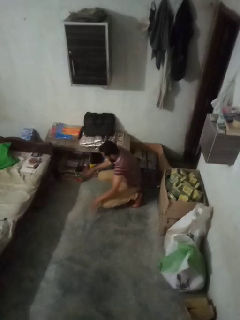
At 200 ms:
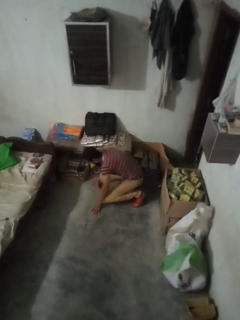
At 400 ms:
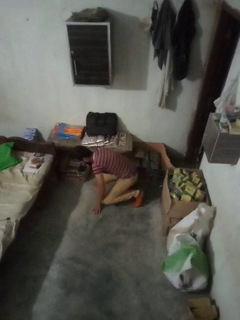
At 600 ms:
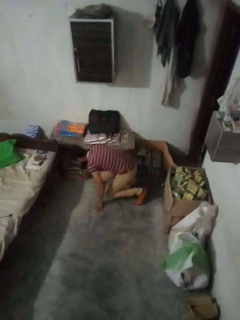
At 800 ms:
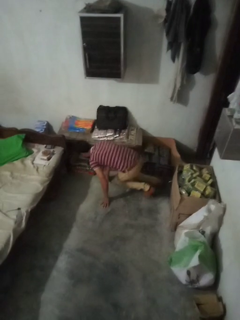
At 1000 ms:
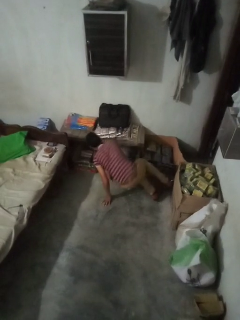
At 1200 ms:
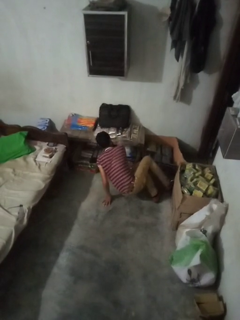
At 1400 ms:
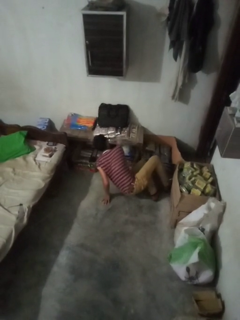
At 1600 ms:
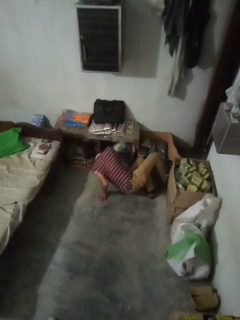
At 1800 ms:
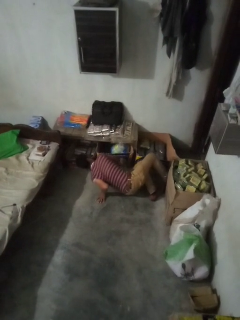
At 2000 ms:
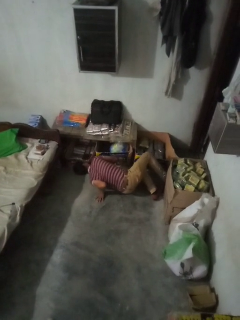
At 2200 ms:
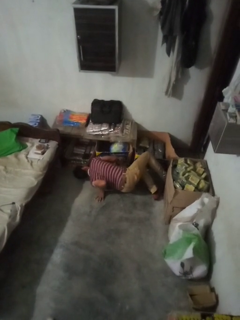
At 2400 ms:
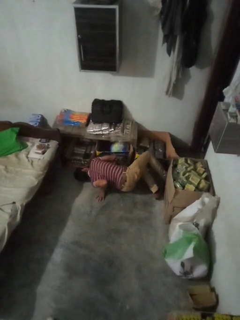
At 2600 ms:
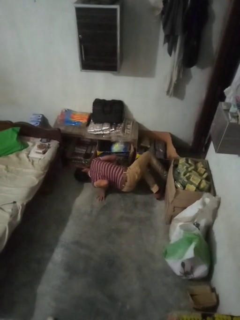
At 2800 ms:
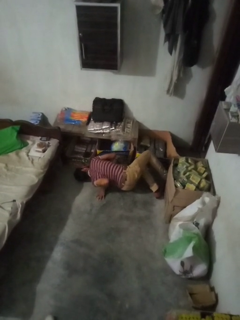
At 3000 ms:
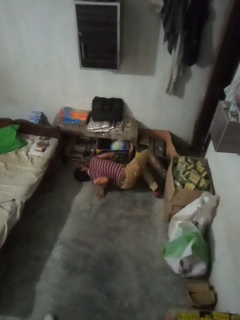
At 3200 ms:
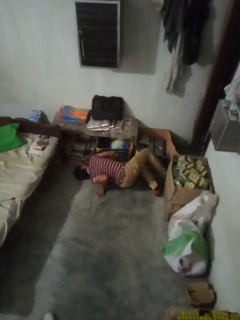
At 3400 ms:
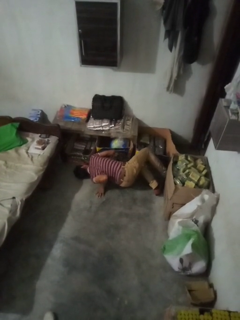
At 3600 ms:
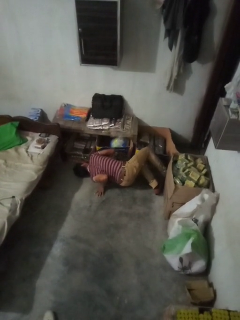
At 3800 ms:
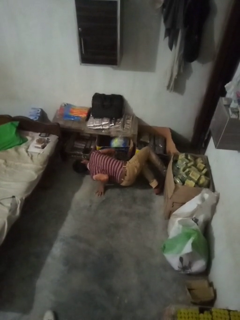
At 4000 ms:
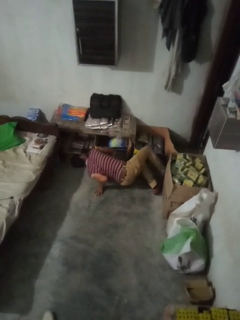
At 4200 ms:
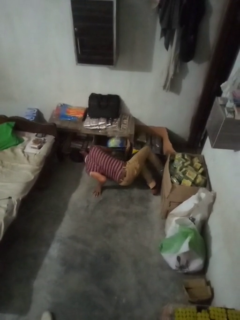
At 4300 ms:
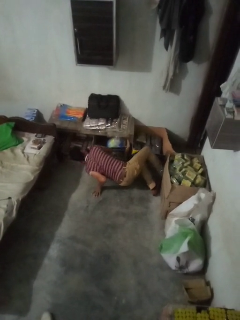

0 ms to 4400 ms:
person lies down on floor

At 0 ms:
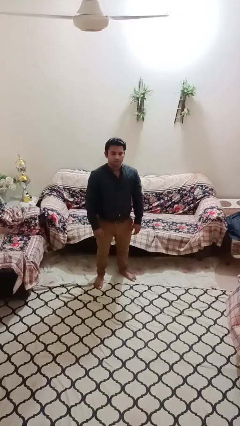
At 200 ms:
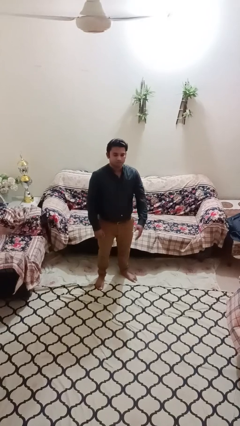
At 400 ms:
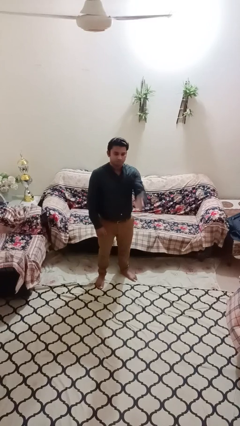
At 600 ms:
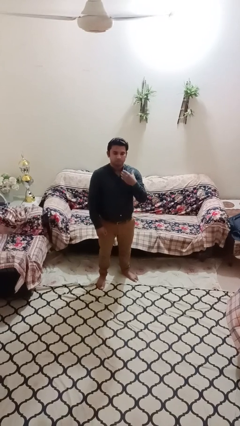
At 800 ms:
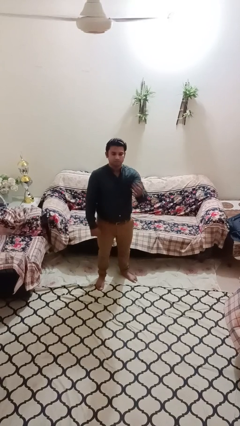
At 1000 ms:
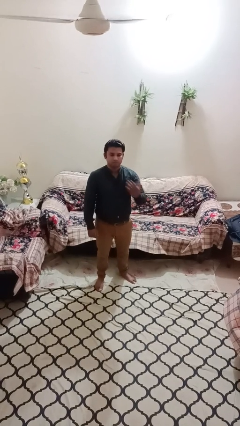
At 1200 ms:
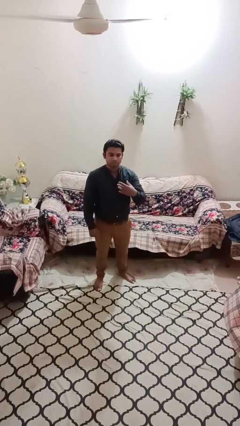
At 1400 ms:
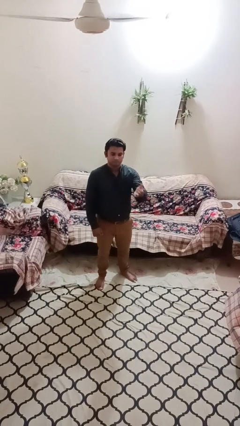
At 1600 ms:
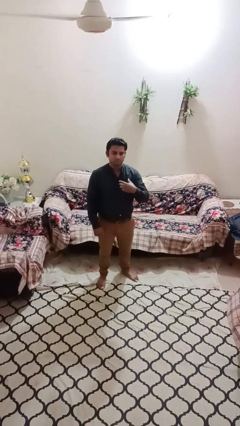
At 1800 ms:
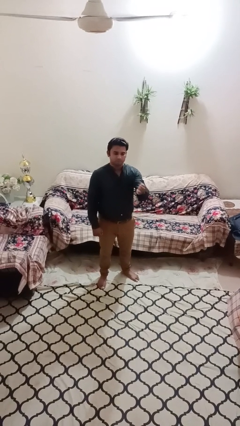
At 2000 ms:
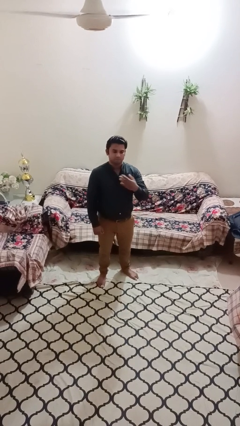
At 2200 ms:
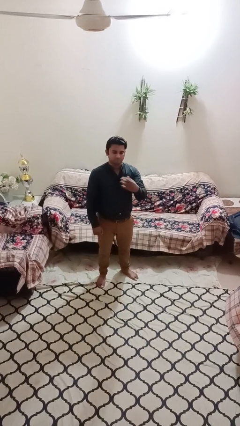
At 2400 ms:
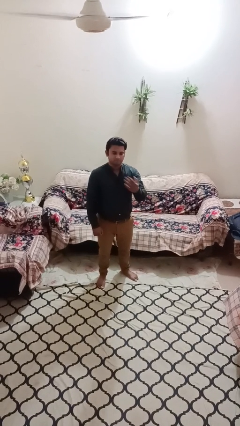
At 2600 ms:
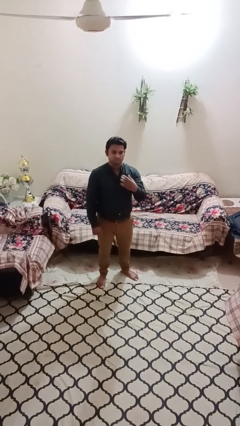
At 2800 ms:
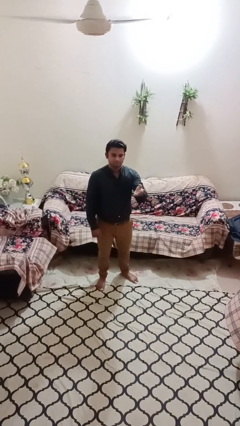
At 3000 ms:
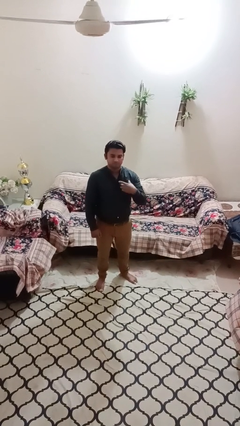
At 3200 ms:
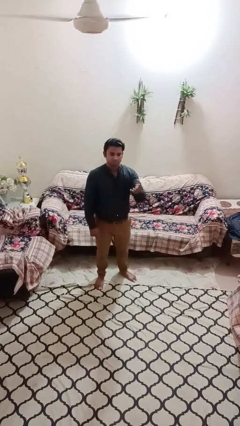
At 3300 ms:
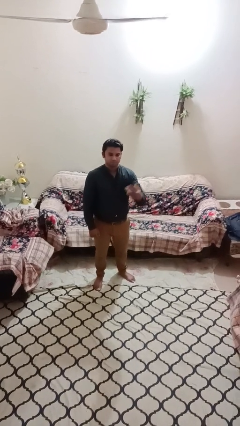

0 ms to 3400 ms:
person gestures come here

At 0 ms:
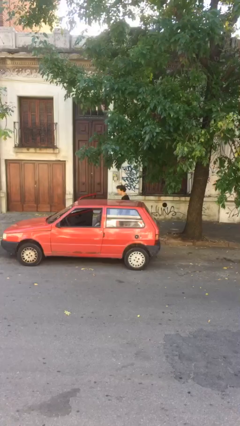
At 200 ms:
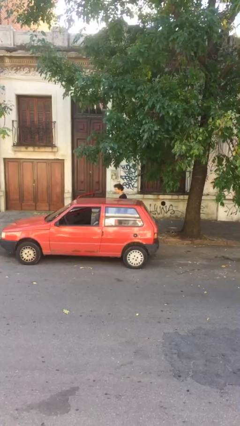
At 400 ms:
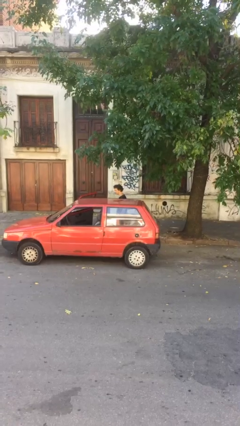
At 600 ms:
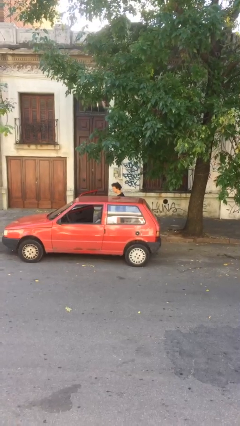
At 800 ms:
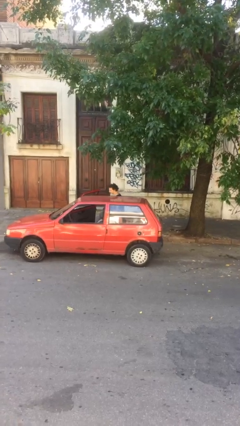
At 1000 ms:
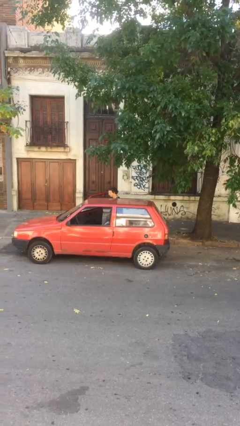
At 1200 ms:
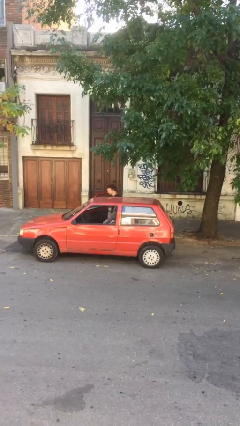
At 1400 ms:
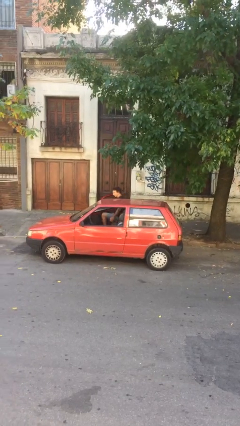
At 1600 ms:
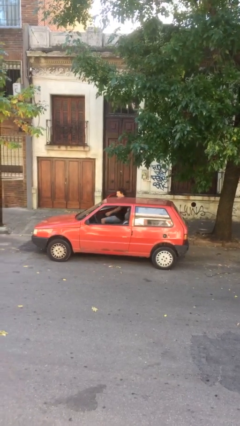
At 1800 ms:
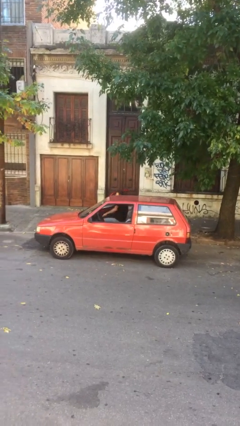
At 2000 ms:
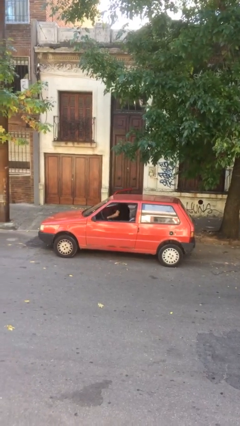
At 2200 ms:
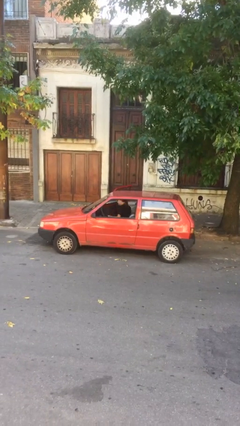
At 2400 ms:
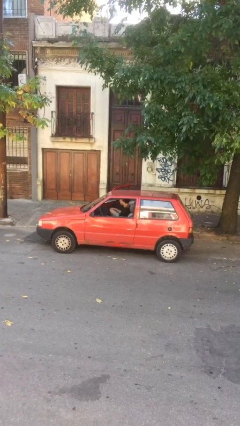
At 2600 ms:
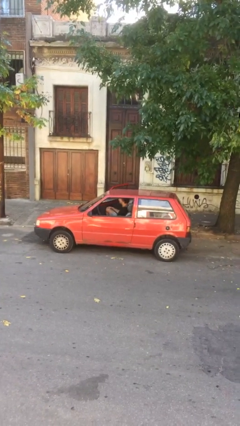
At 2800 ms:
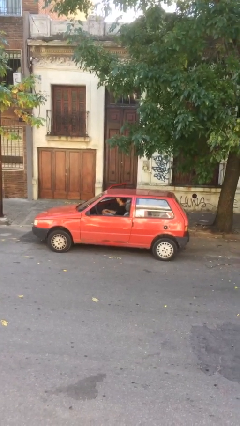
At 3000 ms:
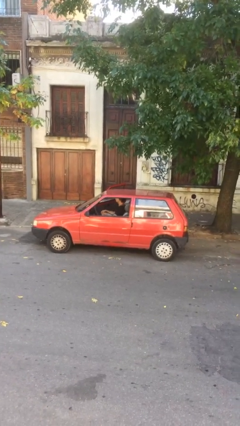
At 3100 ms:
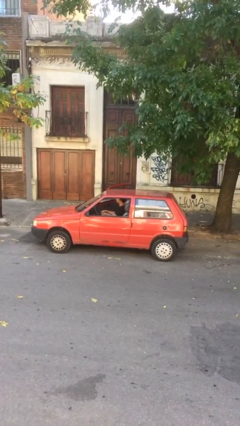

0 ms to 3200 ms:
person enters car

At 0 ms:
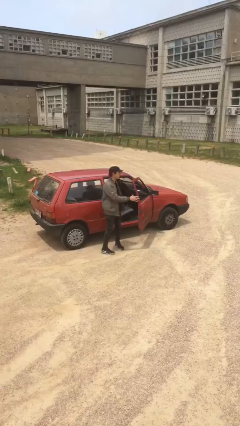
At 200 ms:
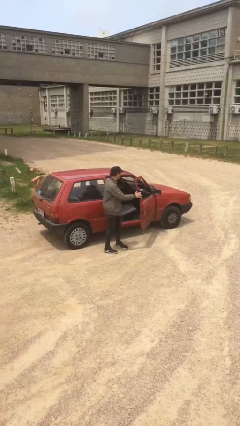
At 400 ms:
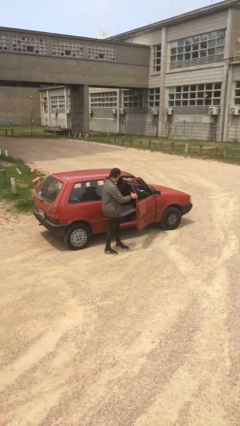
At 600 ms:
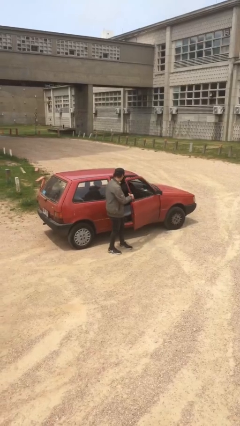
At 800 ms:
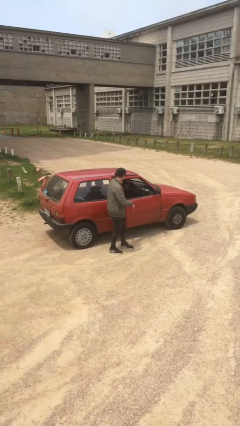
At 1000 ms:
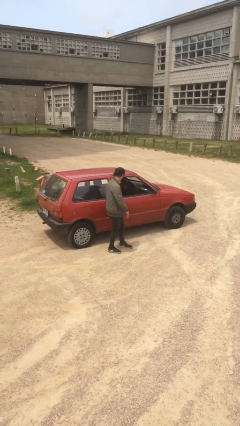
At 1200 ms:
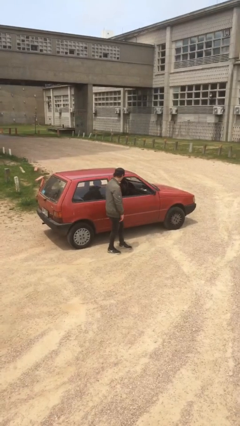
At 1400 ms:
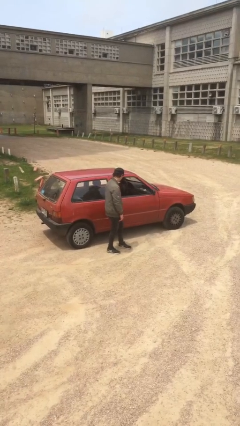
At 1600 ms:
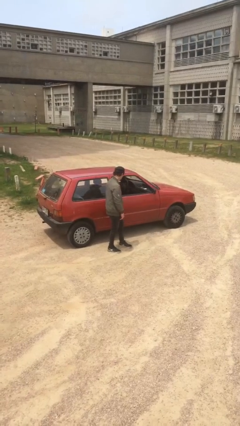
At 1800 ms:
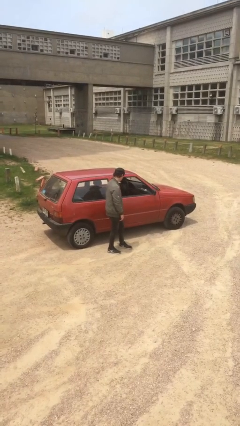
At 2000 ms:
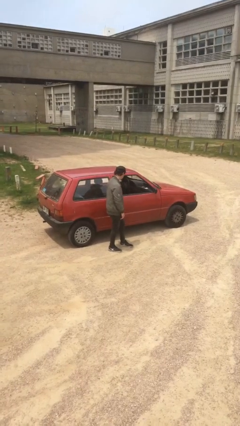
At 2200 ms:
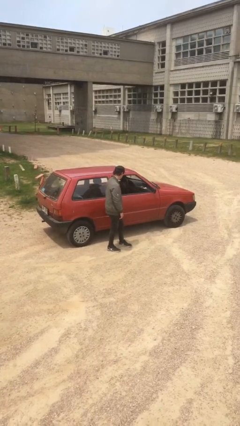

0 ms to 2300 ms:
person closes car door

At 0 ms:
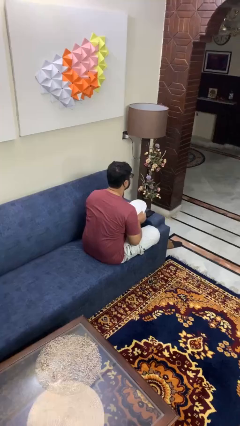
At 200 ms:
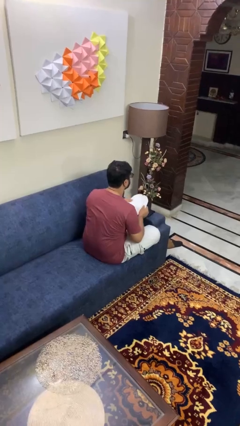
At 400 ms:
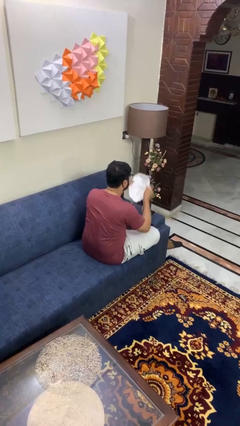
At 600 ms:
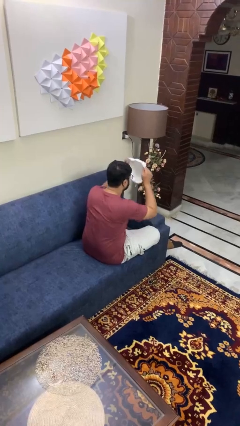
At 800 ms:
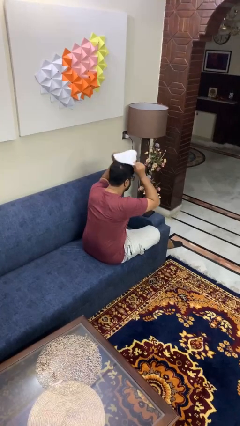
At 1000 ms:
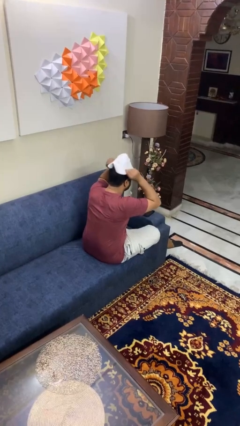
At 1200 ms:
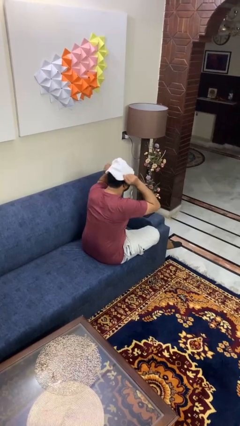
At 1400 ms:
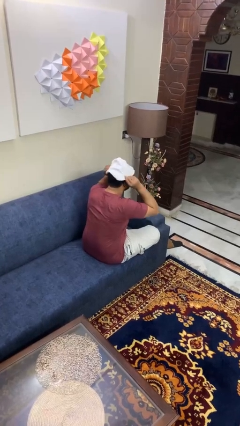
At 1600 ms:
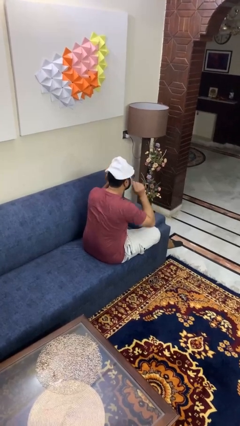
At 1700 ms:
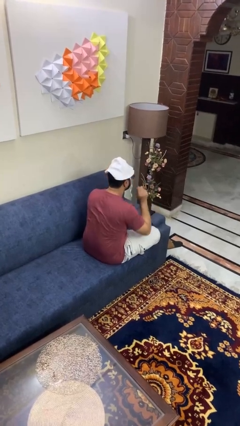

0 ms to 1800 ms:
person puts on hat

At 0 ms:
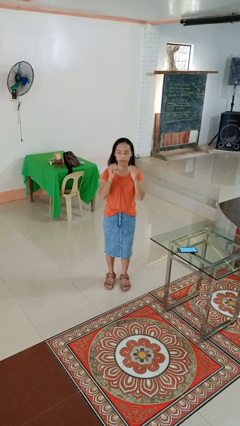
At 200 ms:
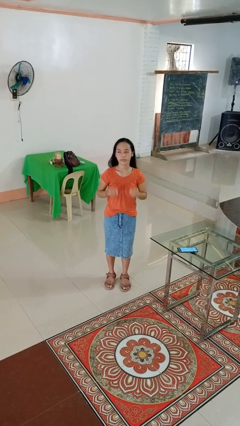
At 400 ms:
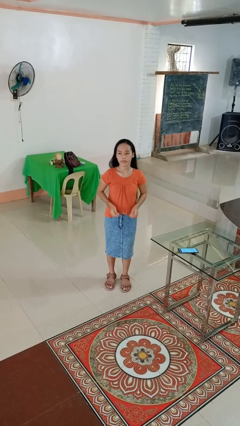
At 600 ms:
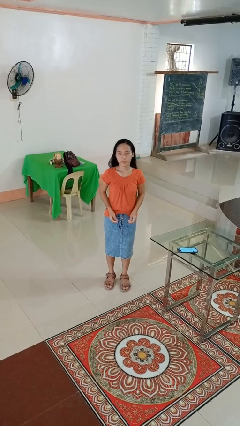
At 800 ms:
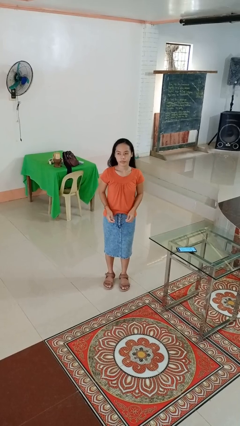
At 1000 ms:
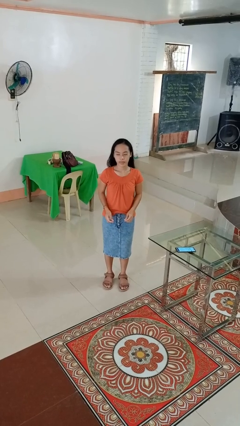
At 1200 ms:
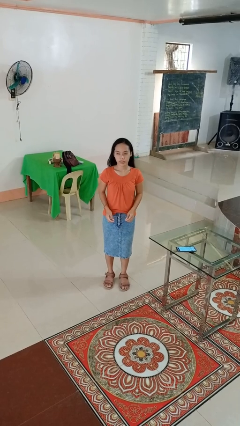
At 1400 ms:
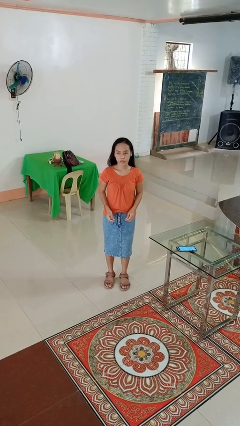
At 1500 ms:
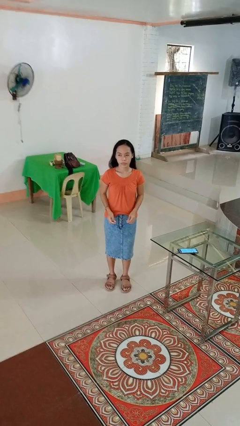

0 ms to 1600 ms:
person takes off glasses

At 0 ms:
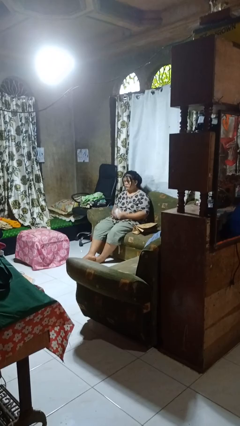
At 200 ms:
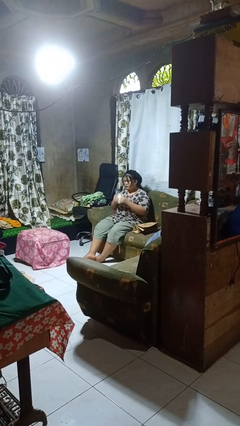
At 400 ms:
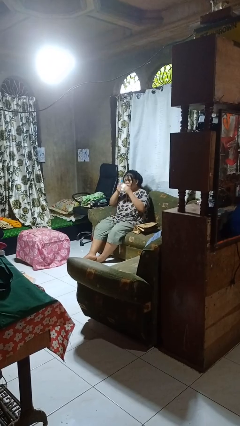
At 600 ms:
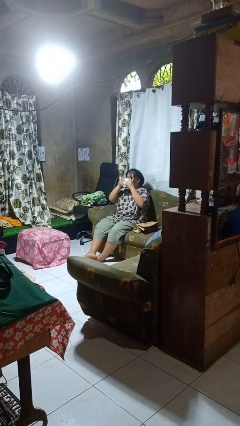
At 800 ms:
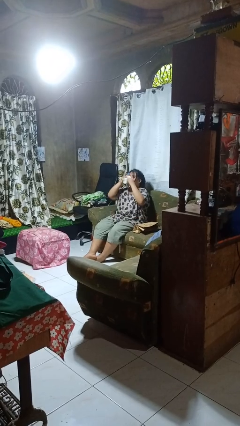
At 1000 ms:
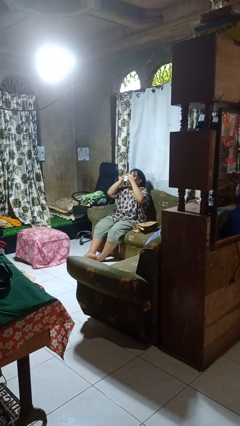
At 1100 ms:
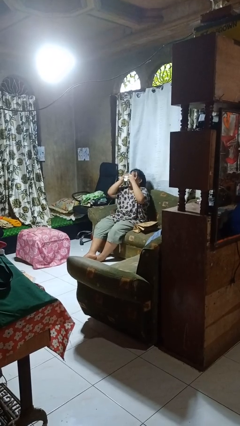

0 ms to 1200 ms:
person drinks from mug

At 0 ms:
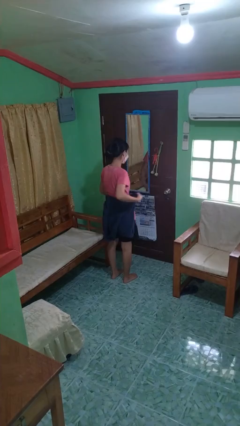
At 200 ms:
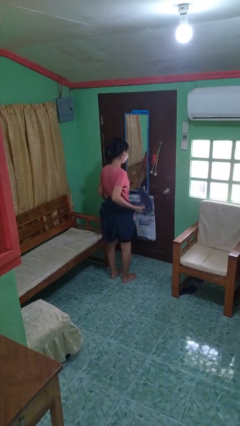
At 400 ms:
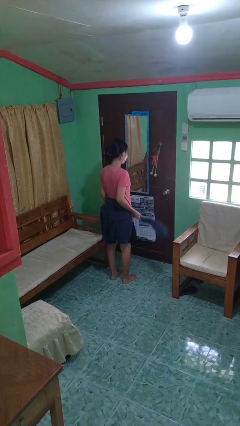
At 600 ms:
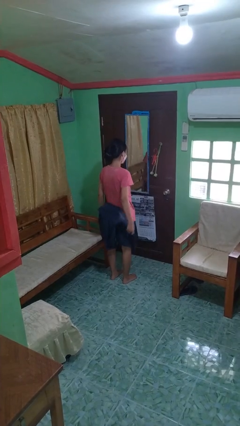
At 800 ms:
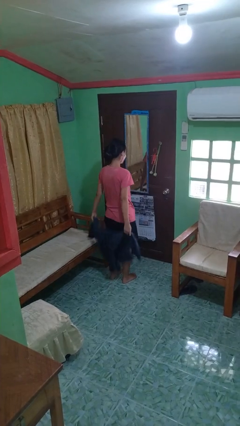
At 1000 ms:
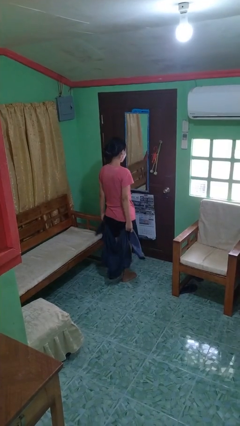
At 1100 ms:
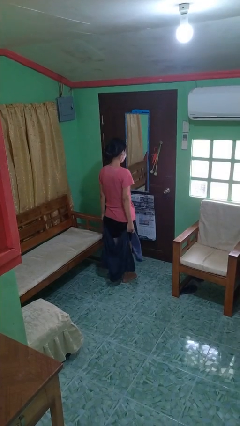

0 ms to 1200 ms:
person unties jacket around waist
